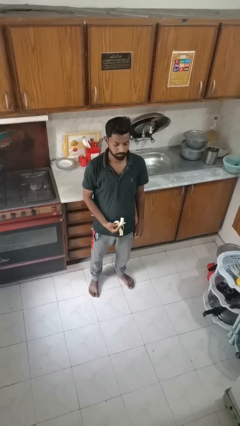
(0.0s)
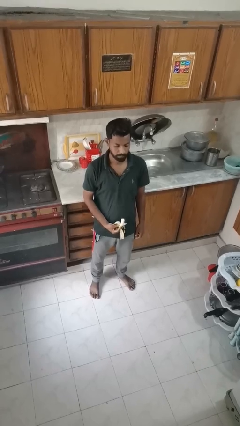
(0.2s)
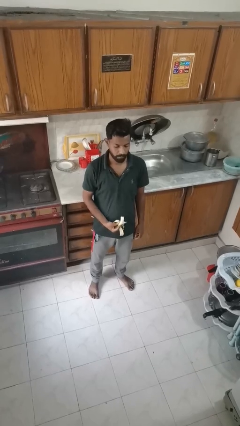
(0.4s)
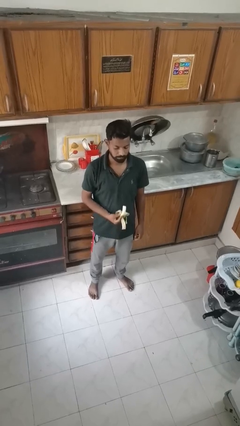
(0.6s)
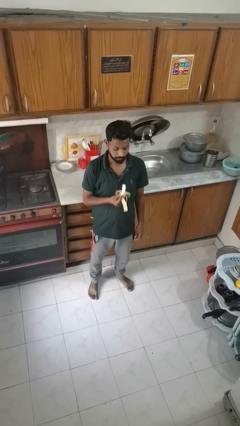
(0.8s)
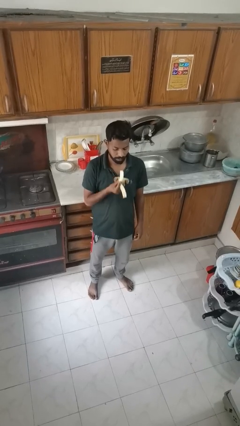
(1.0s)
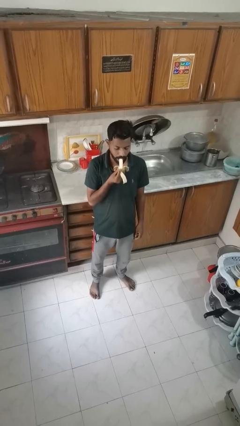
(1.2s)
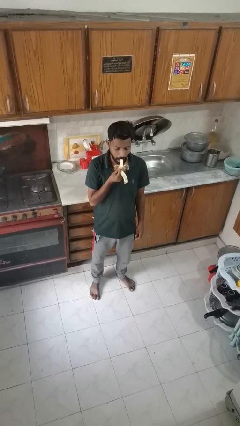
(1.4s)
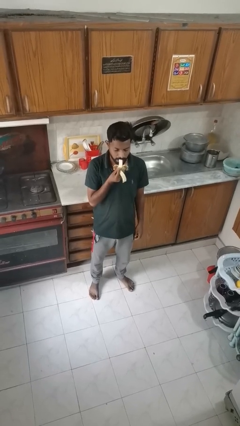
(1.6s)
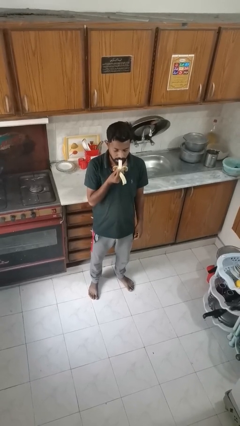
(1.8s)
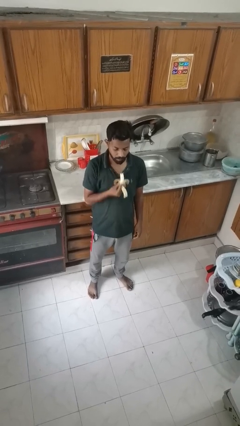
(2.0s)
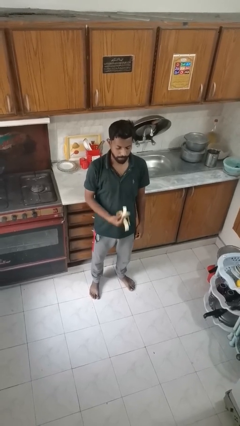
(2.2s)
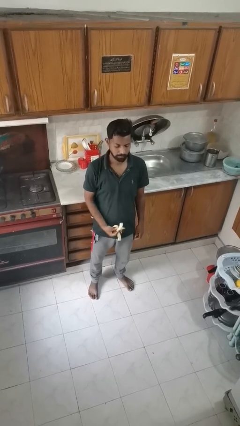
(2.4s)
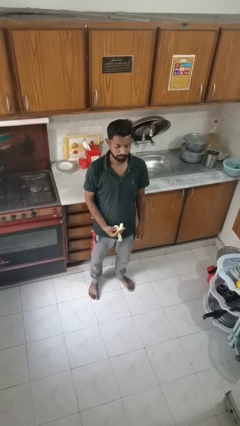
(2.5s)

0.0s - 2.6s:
person eats banana

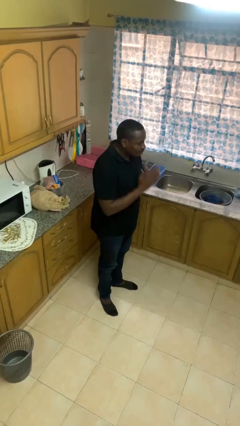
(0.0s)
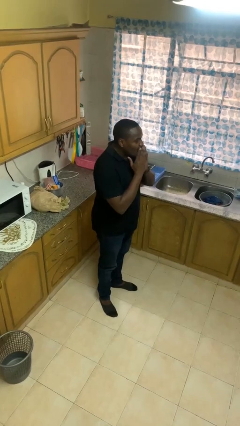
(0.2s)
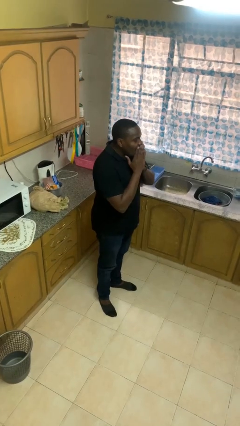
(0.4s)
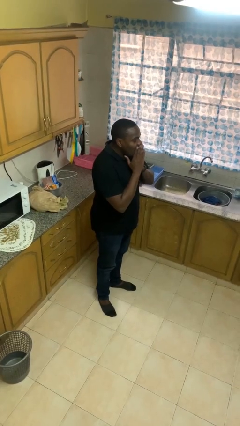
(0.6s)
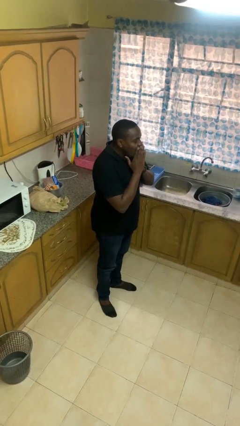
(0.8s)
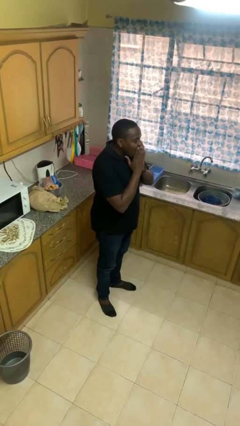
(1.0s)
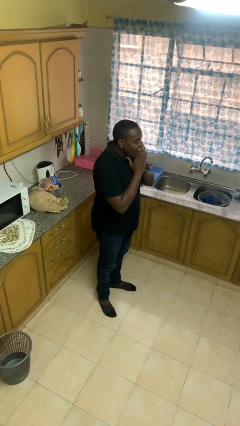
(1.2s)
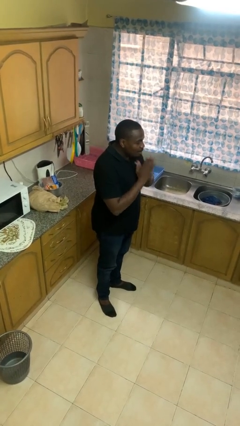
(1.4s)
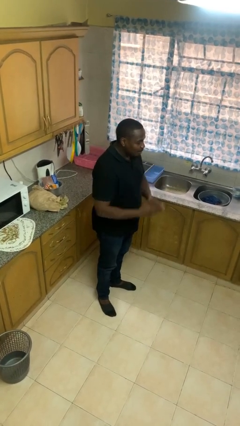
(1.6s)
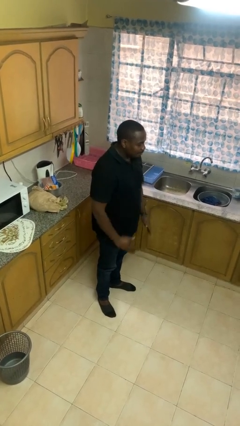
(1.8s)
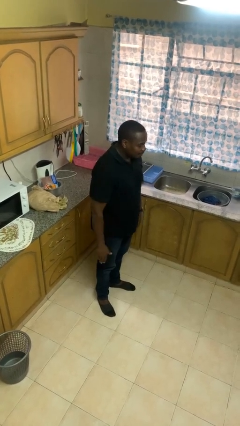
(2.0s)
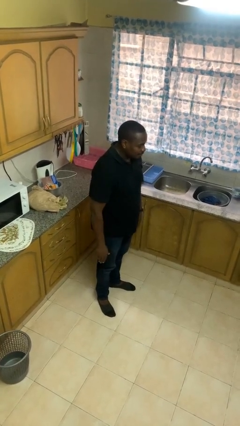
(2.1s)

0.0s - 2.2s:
person yawns

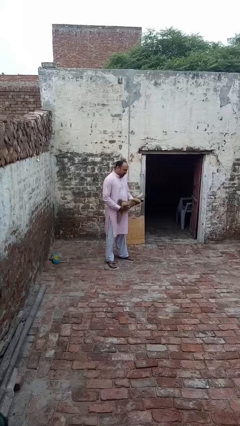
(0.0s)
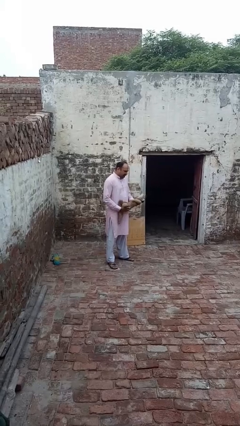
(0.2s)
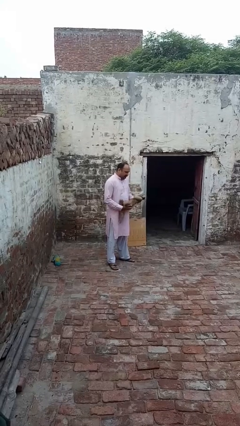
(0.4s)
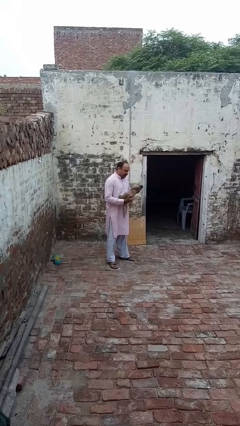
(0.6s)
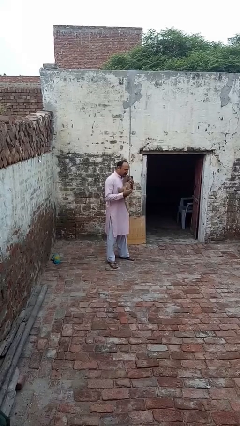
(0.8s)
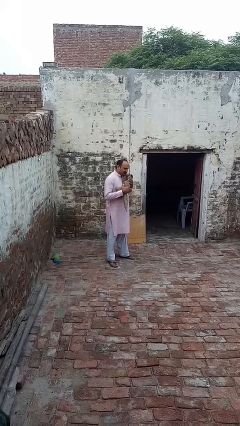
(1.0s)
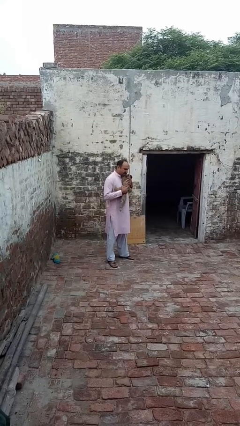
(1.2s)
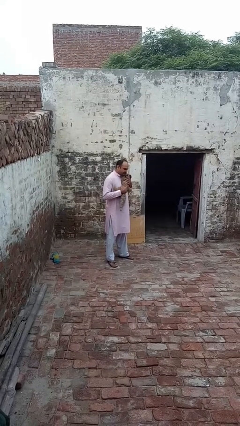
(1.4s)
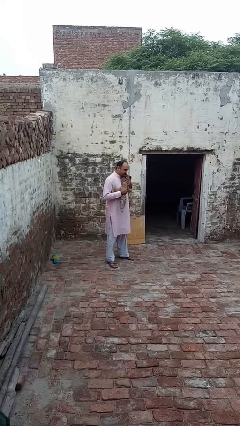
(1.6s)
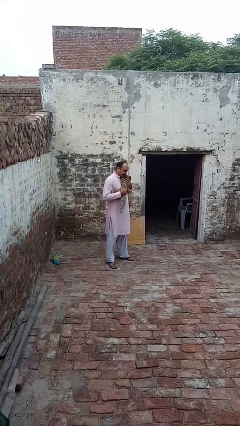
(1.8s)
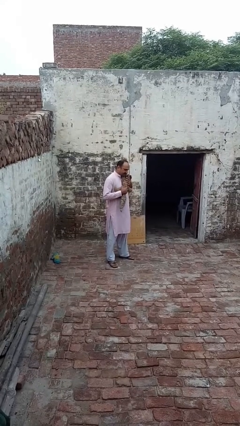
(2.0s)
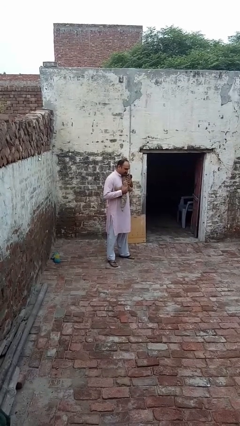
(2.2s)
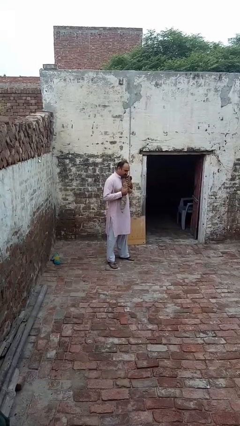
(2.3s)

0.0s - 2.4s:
person hugs stuffed animal

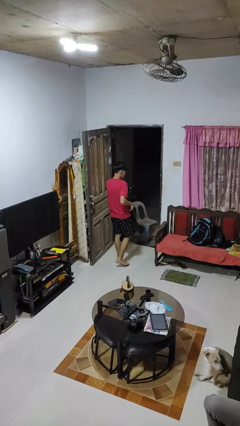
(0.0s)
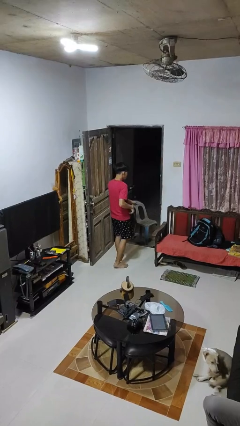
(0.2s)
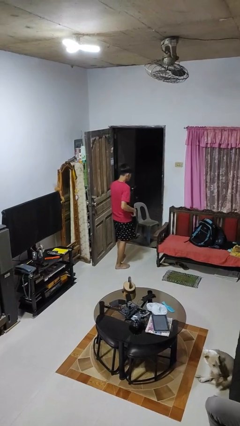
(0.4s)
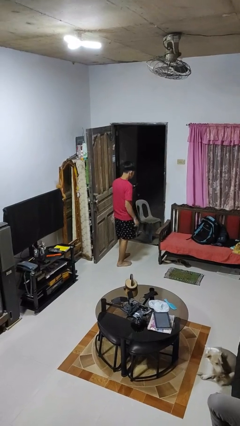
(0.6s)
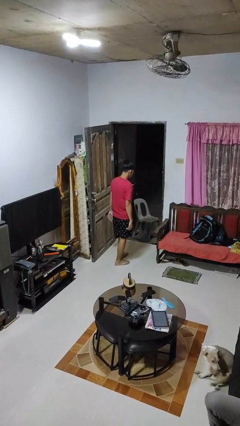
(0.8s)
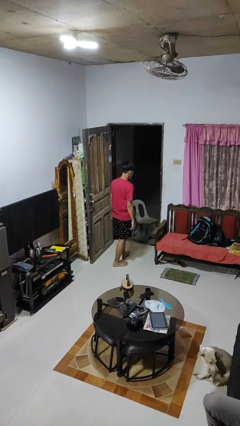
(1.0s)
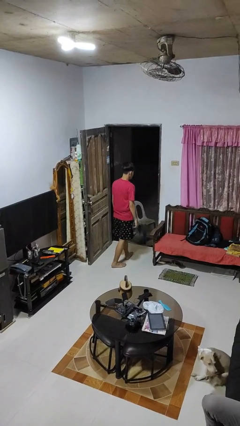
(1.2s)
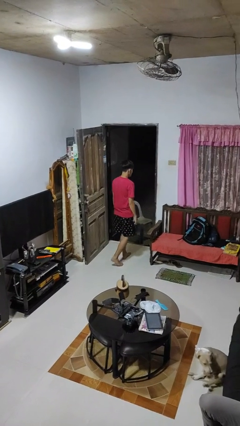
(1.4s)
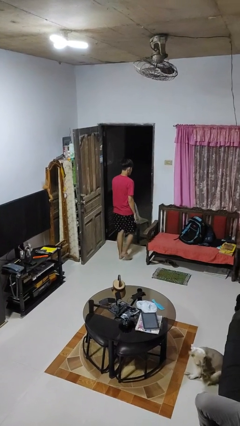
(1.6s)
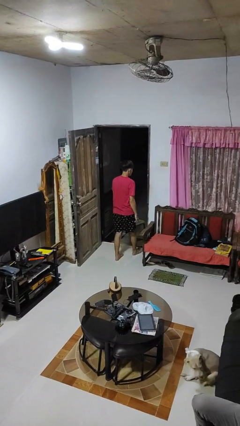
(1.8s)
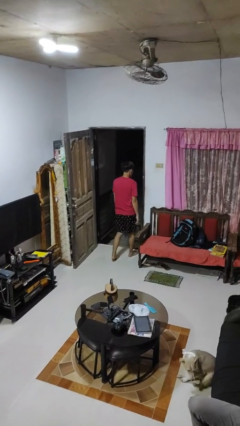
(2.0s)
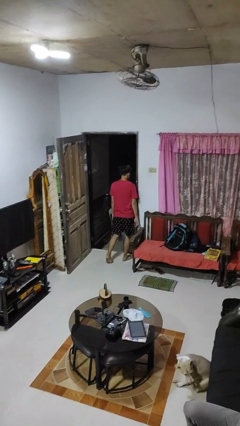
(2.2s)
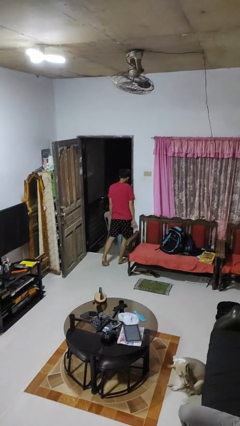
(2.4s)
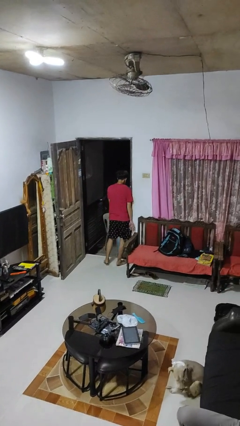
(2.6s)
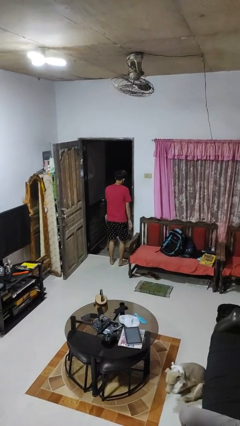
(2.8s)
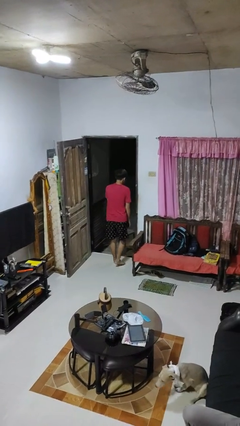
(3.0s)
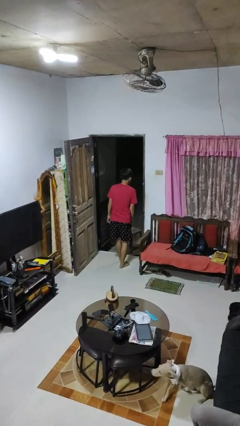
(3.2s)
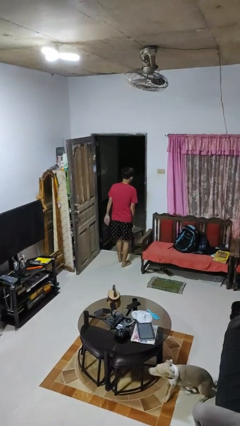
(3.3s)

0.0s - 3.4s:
person bumps into wall

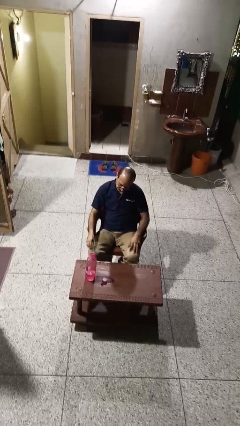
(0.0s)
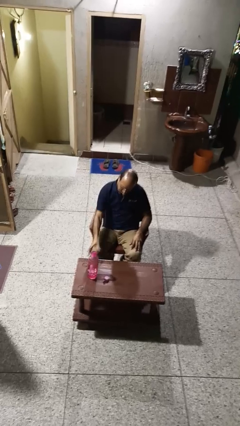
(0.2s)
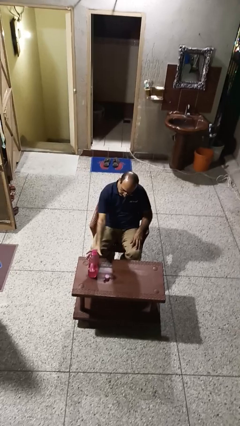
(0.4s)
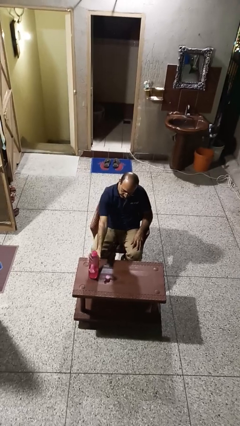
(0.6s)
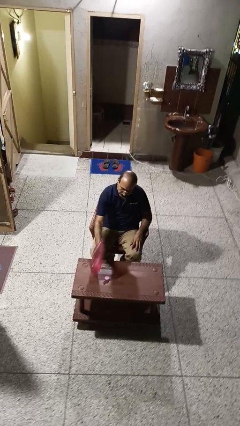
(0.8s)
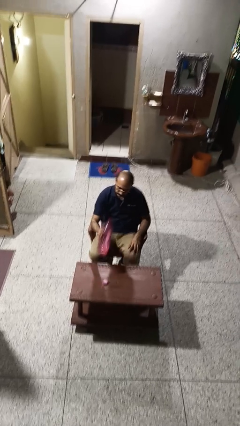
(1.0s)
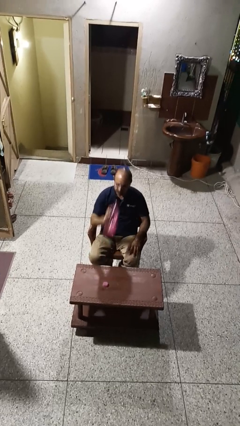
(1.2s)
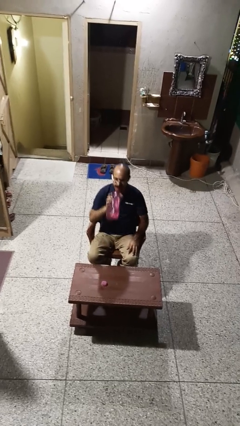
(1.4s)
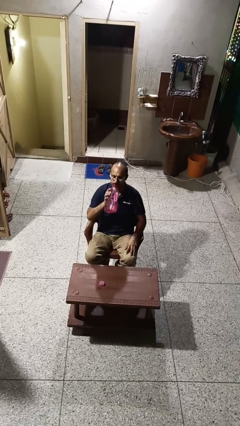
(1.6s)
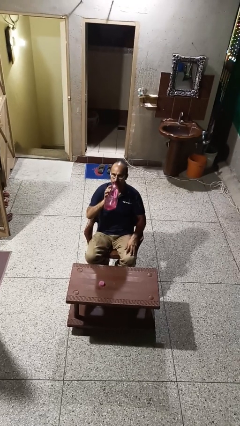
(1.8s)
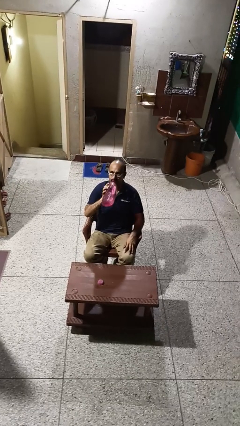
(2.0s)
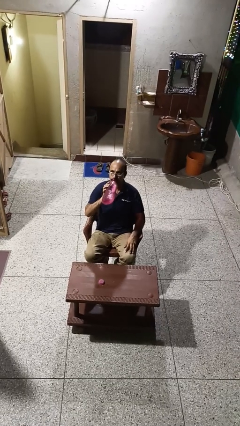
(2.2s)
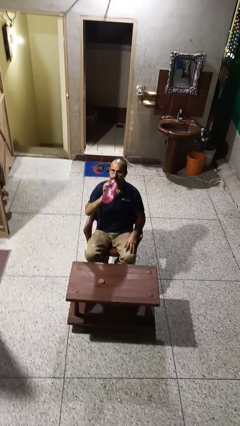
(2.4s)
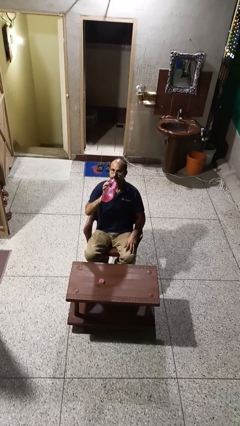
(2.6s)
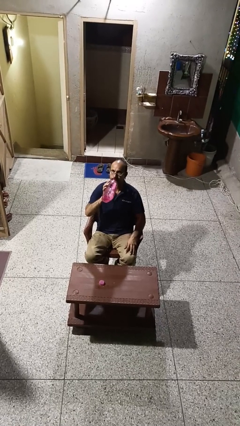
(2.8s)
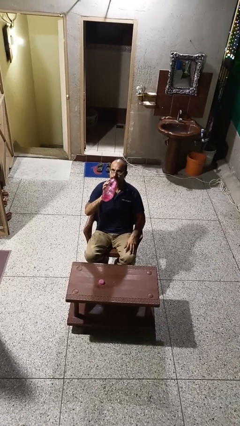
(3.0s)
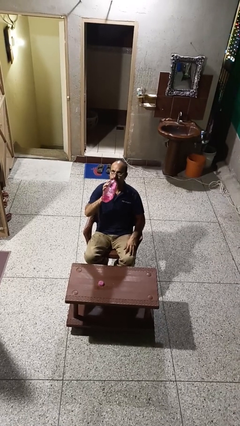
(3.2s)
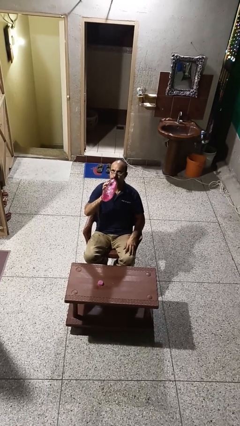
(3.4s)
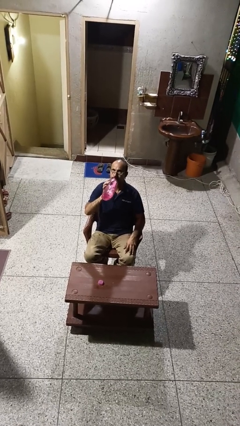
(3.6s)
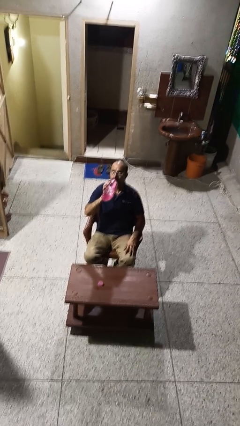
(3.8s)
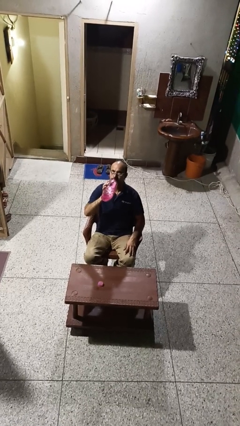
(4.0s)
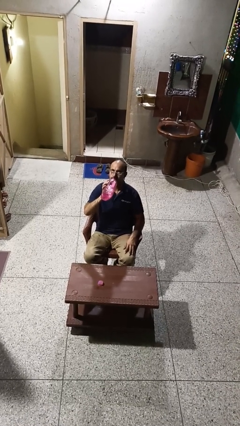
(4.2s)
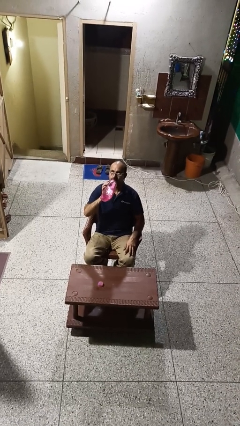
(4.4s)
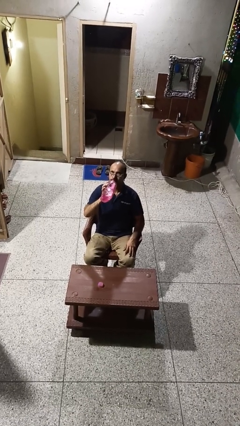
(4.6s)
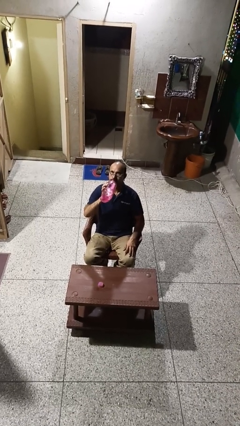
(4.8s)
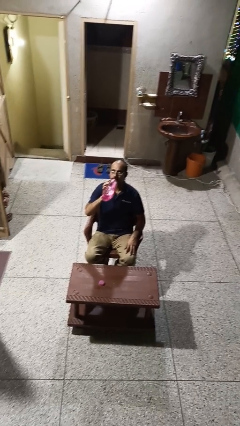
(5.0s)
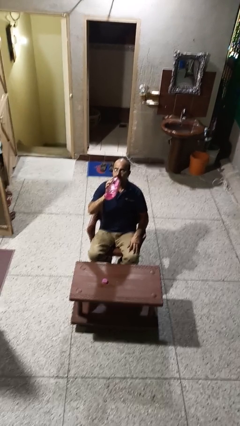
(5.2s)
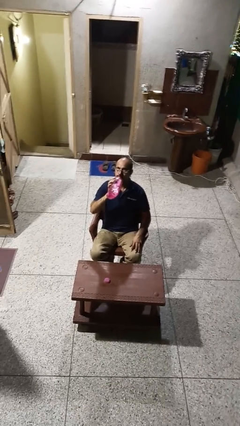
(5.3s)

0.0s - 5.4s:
person drinks from bottle

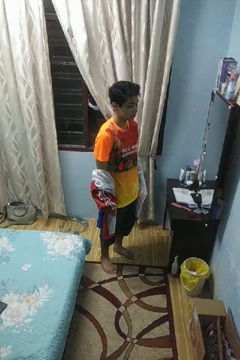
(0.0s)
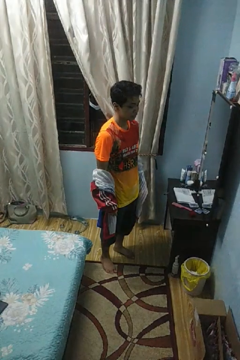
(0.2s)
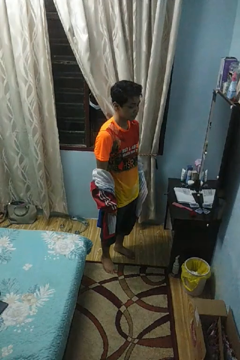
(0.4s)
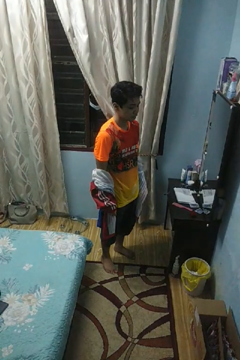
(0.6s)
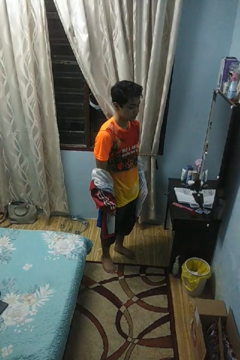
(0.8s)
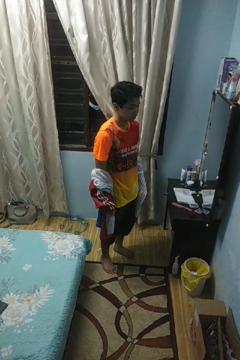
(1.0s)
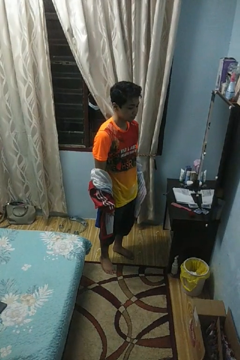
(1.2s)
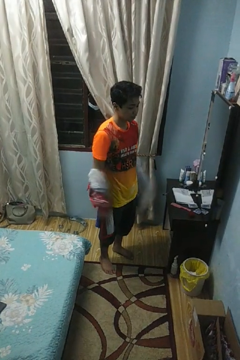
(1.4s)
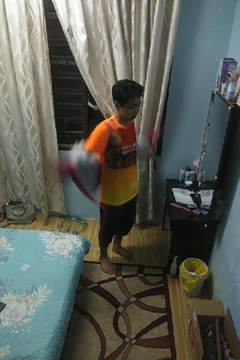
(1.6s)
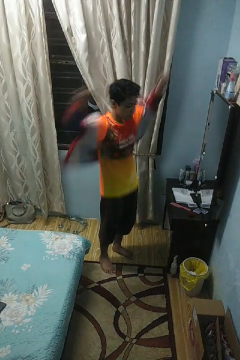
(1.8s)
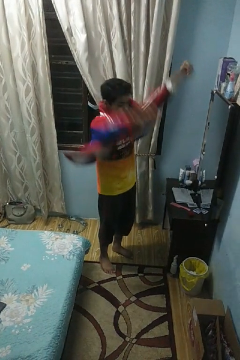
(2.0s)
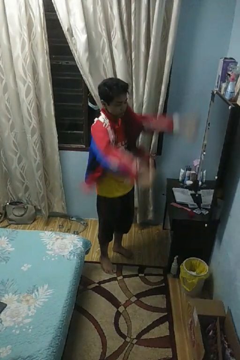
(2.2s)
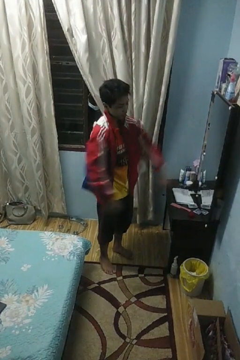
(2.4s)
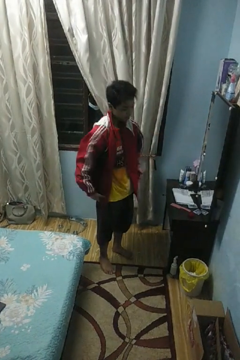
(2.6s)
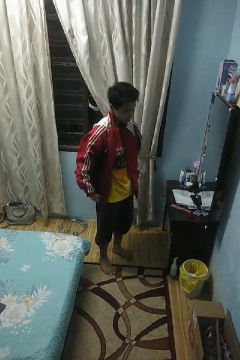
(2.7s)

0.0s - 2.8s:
person puts on jacket
